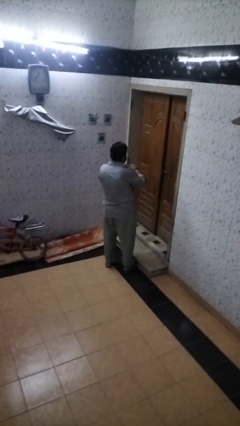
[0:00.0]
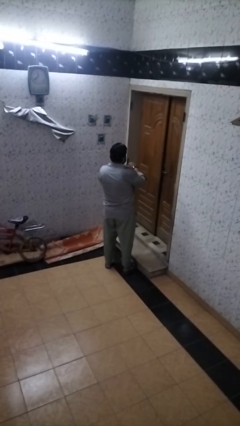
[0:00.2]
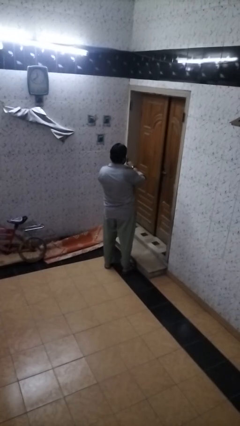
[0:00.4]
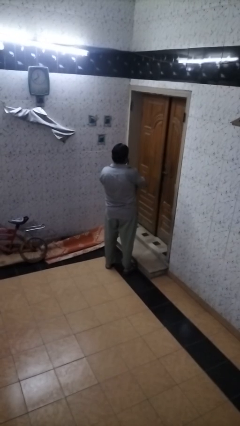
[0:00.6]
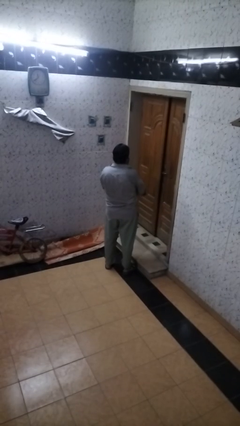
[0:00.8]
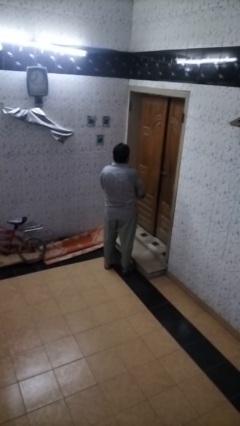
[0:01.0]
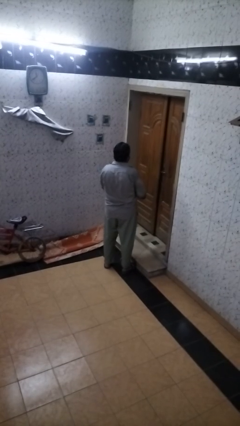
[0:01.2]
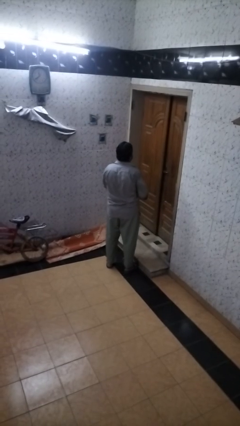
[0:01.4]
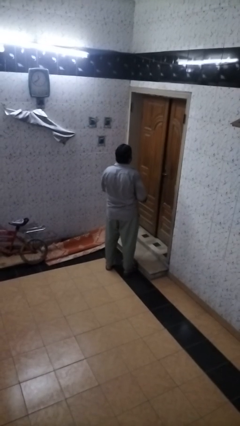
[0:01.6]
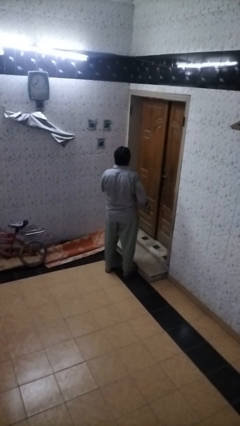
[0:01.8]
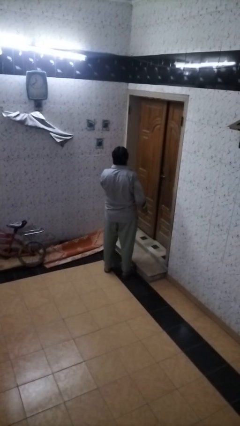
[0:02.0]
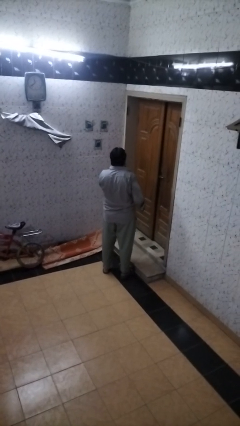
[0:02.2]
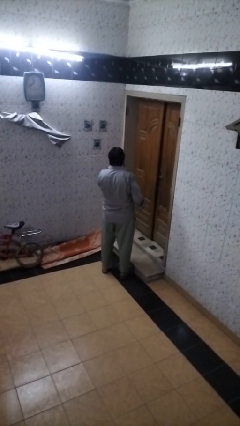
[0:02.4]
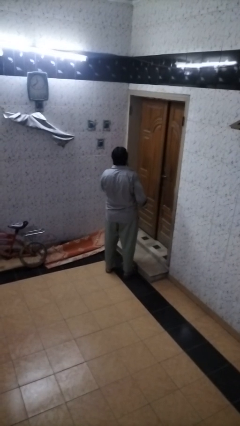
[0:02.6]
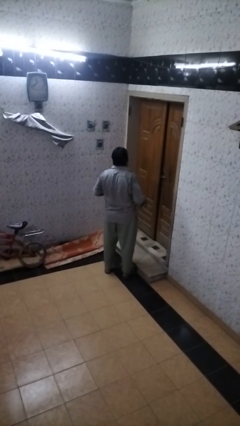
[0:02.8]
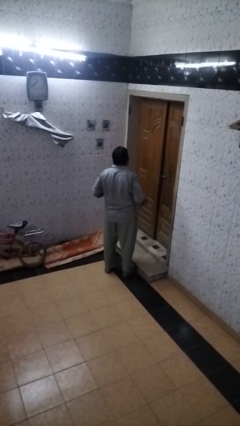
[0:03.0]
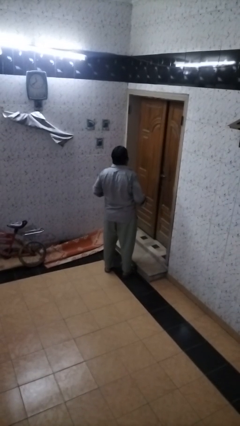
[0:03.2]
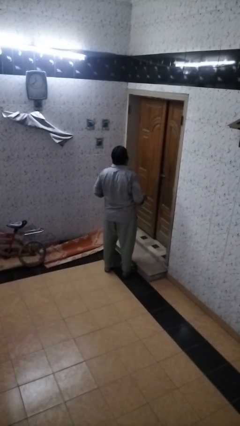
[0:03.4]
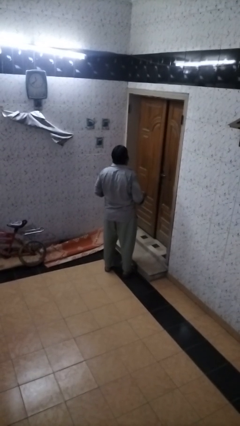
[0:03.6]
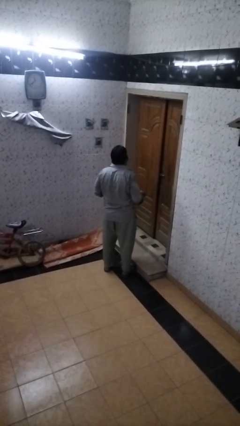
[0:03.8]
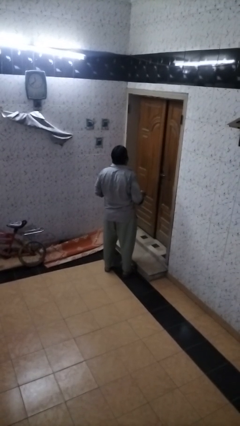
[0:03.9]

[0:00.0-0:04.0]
person takes off wristwatch

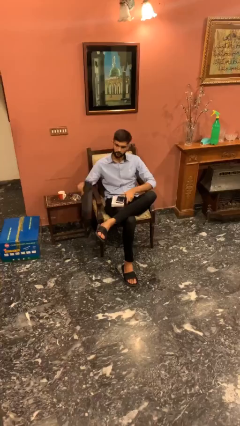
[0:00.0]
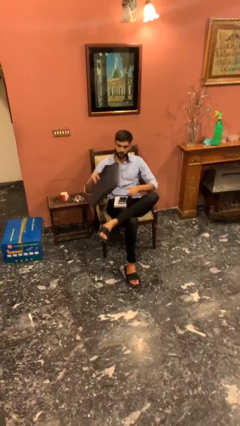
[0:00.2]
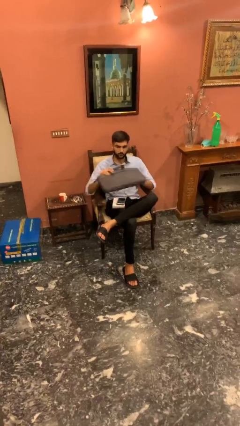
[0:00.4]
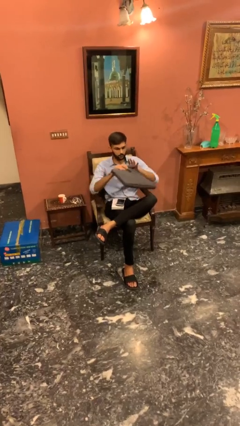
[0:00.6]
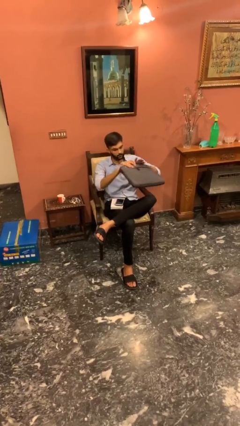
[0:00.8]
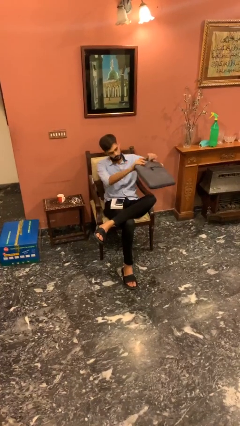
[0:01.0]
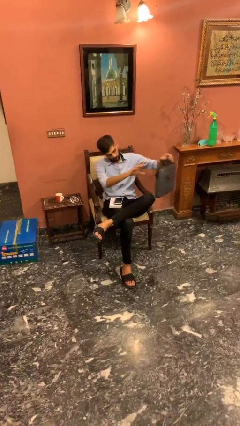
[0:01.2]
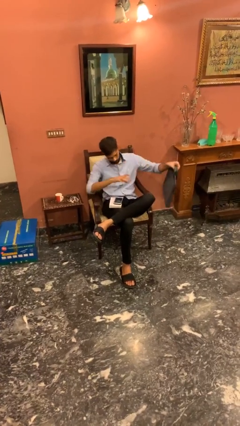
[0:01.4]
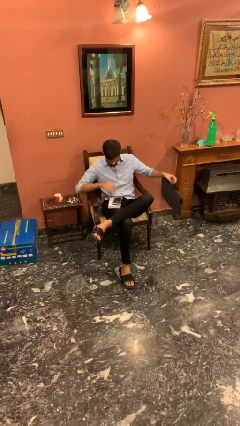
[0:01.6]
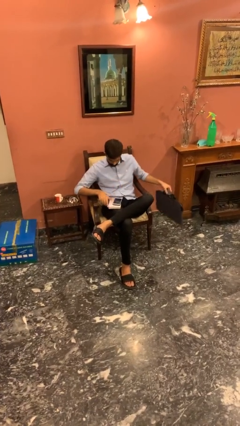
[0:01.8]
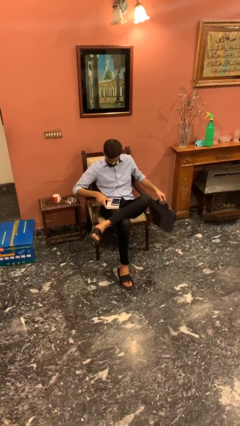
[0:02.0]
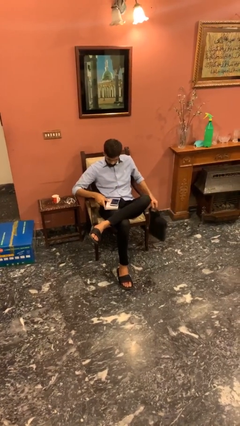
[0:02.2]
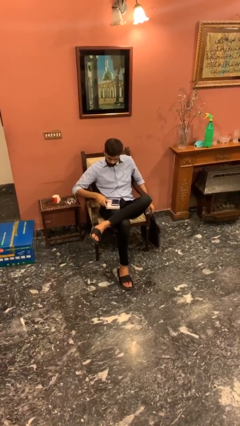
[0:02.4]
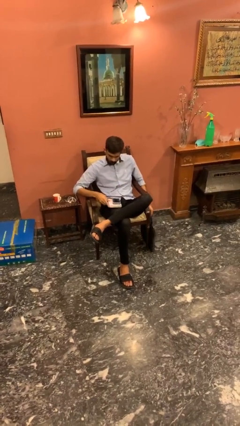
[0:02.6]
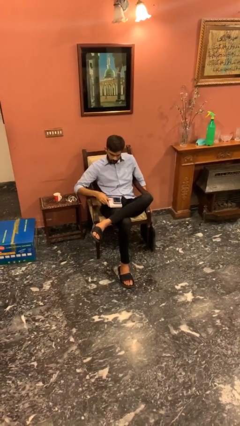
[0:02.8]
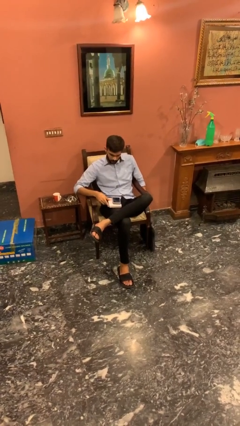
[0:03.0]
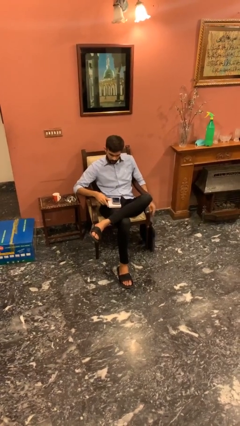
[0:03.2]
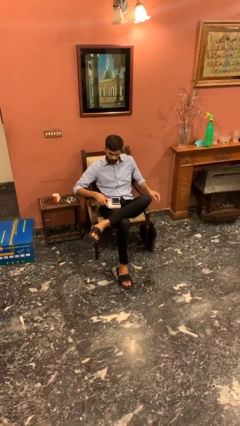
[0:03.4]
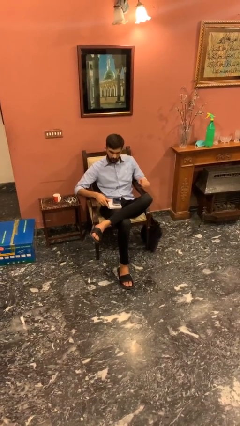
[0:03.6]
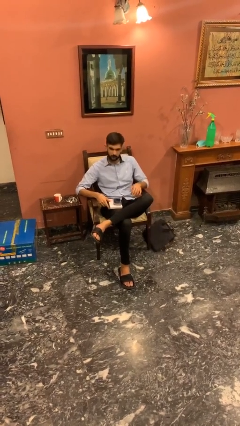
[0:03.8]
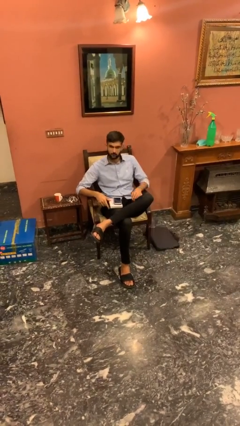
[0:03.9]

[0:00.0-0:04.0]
person puts down object on floor

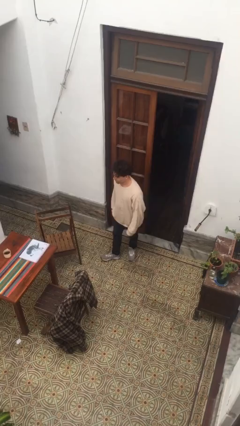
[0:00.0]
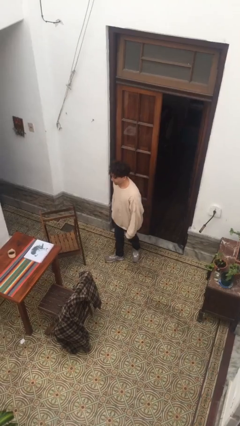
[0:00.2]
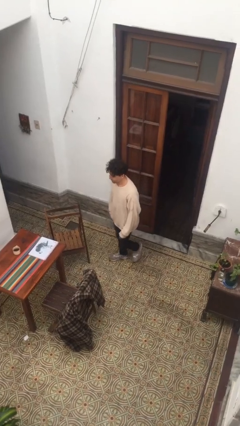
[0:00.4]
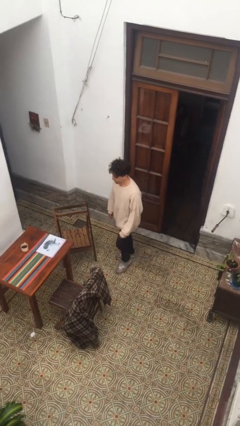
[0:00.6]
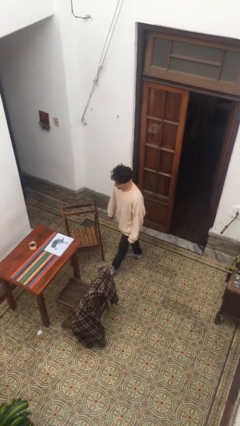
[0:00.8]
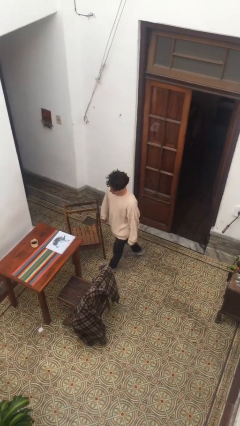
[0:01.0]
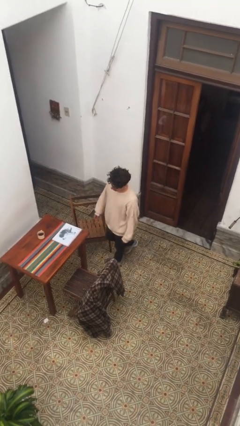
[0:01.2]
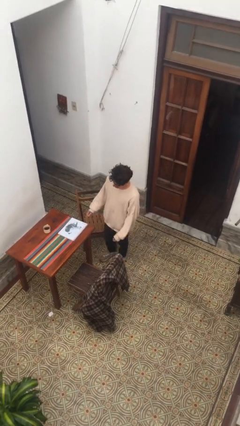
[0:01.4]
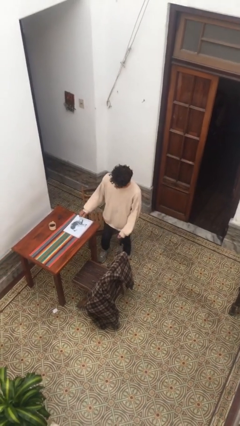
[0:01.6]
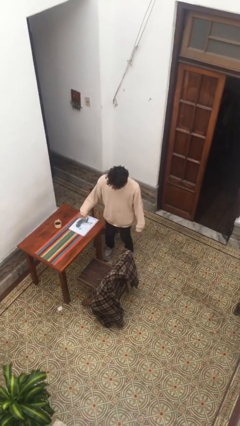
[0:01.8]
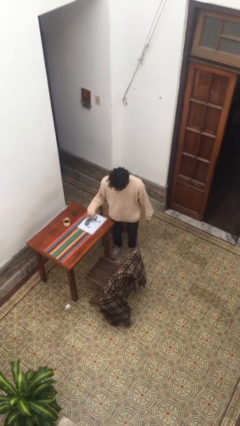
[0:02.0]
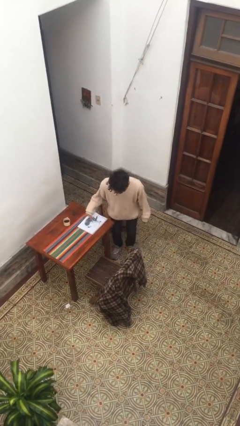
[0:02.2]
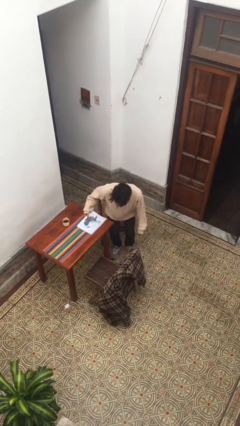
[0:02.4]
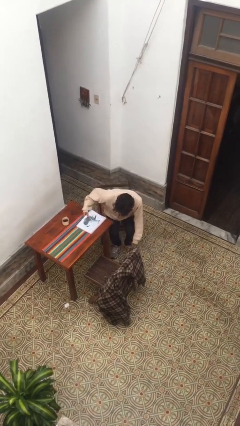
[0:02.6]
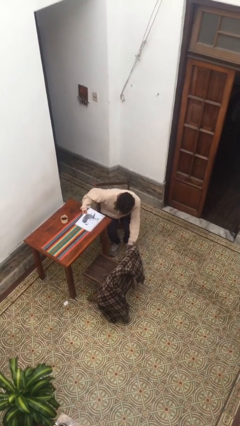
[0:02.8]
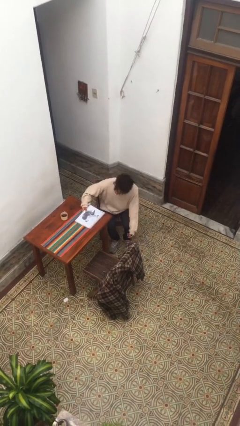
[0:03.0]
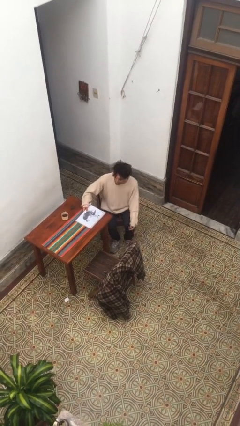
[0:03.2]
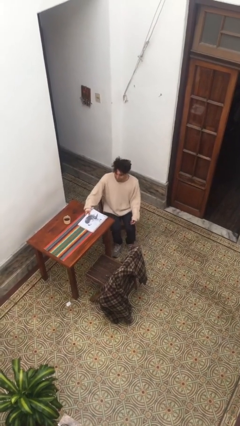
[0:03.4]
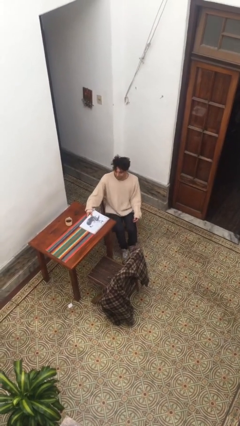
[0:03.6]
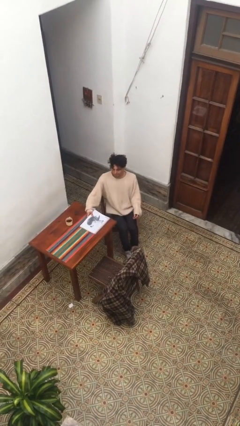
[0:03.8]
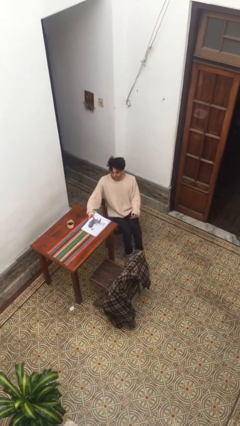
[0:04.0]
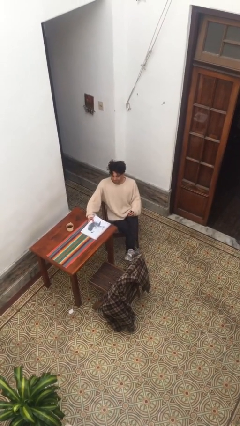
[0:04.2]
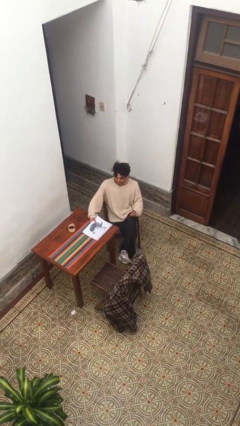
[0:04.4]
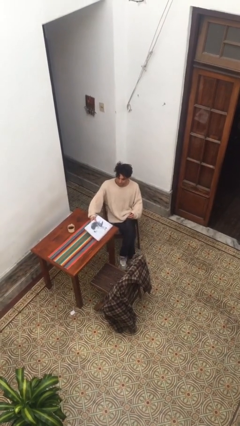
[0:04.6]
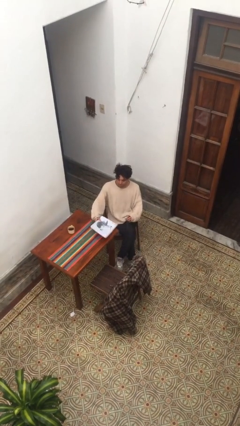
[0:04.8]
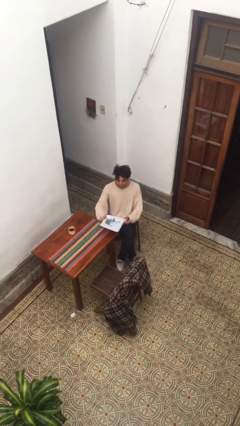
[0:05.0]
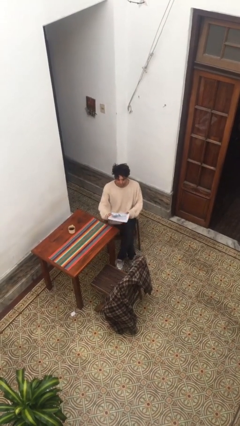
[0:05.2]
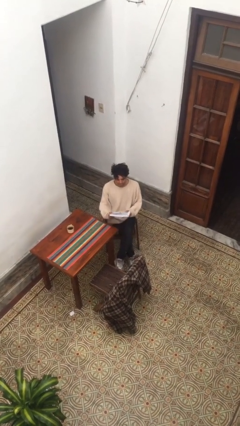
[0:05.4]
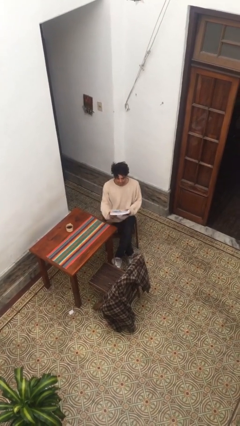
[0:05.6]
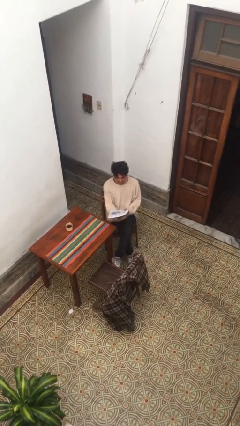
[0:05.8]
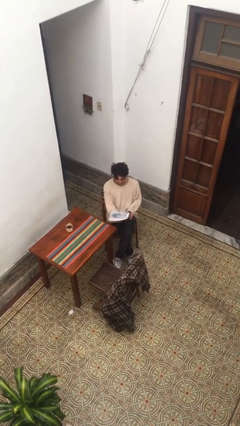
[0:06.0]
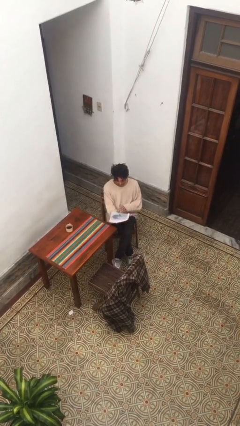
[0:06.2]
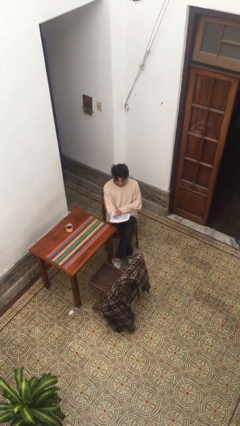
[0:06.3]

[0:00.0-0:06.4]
person sits down

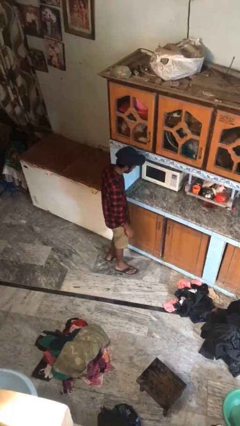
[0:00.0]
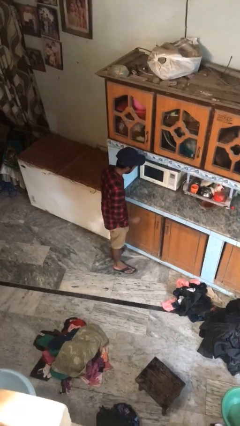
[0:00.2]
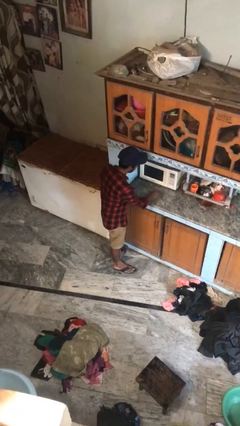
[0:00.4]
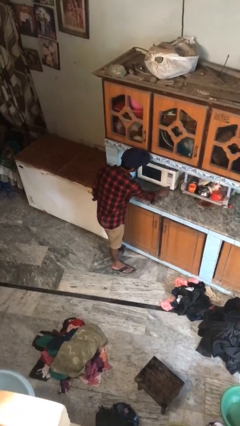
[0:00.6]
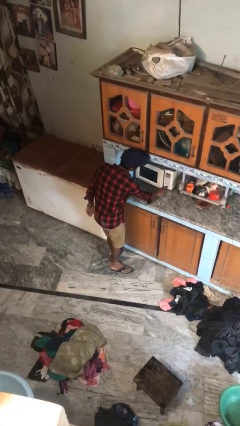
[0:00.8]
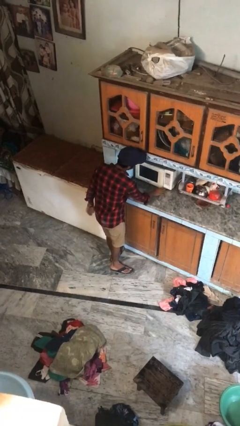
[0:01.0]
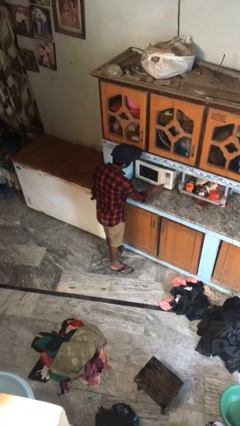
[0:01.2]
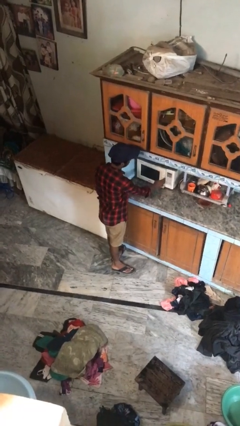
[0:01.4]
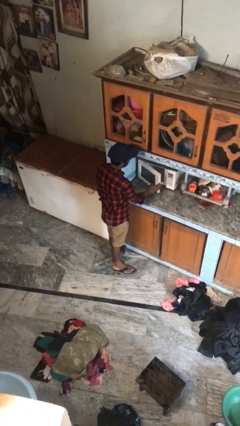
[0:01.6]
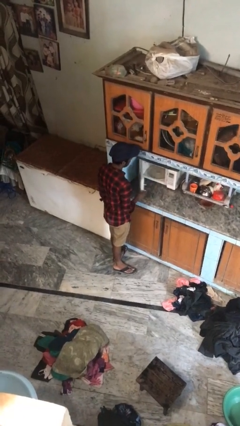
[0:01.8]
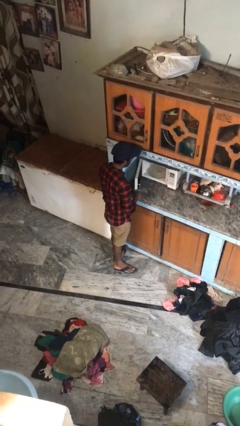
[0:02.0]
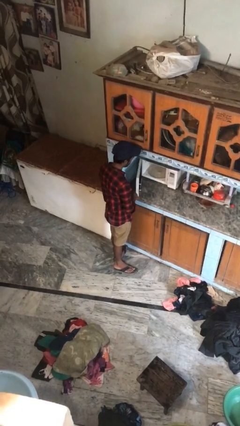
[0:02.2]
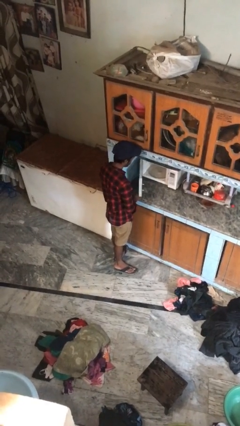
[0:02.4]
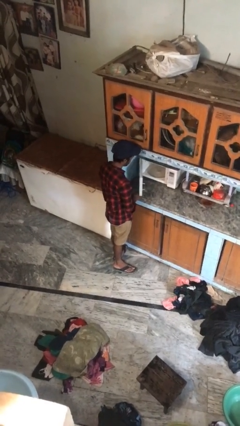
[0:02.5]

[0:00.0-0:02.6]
person opens oven door

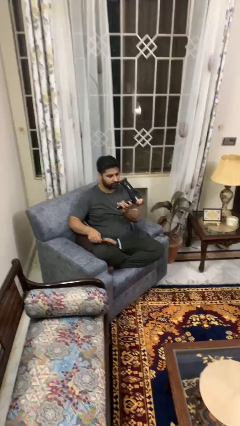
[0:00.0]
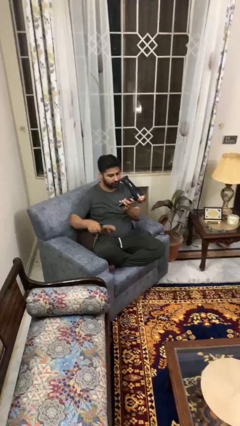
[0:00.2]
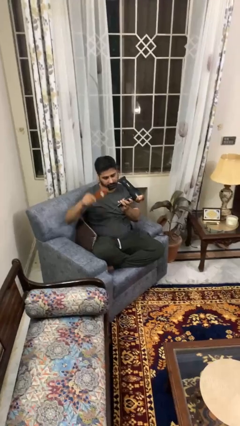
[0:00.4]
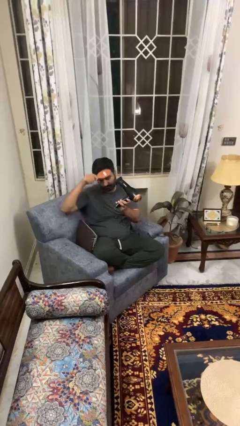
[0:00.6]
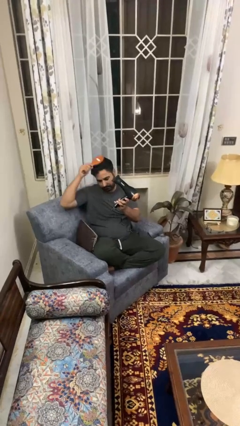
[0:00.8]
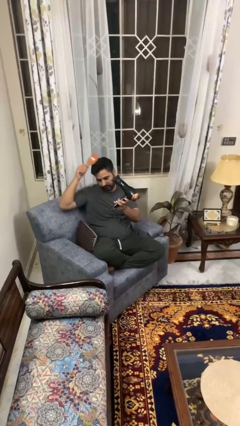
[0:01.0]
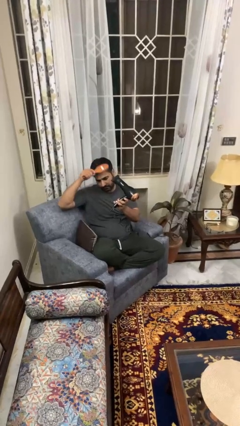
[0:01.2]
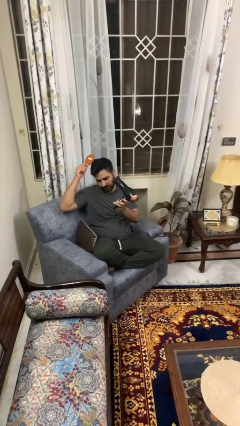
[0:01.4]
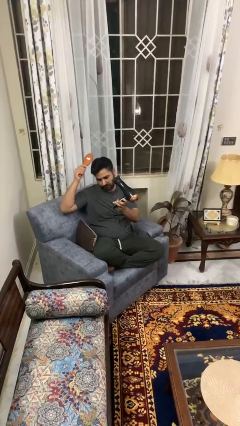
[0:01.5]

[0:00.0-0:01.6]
person dries hair with hairdryer
